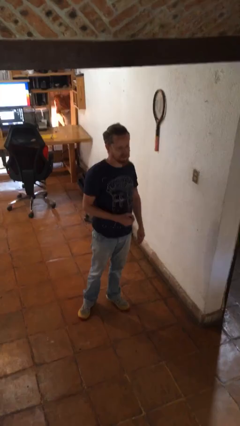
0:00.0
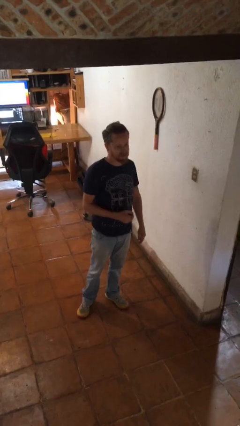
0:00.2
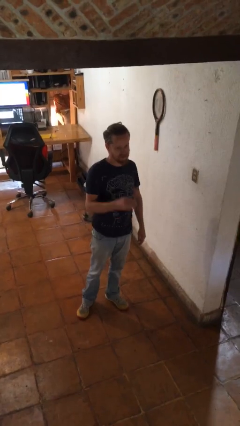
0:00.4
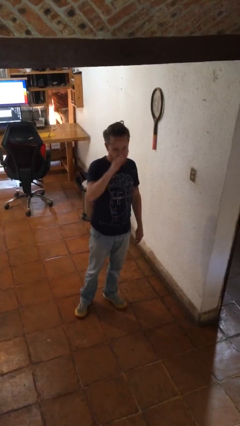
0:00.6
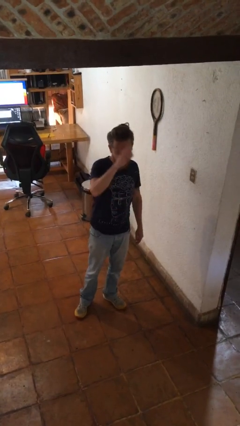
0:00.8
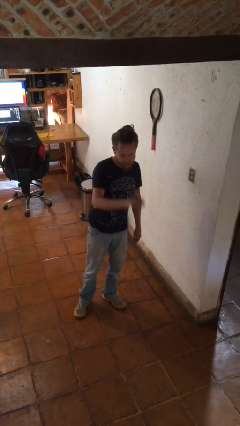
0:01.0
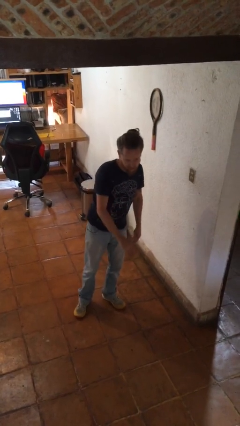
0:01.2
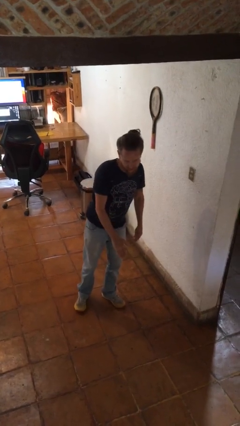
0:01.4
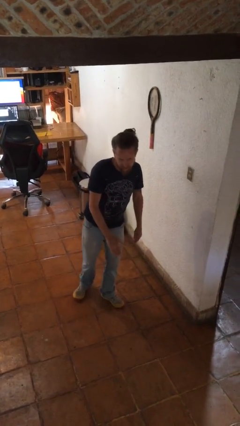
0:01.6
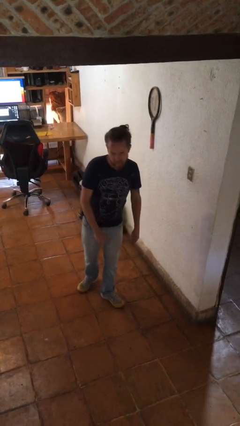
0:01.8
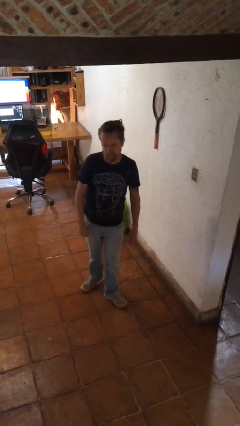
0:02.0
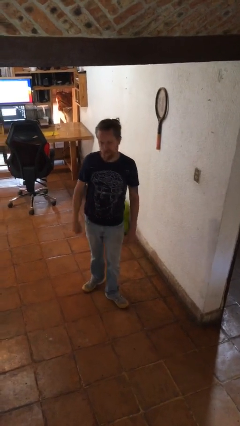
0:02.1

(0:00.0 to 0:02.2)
person gestures swipe down

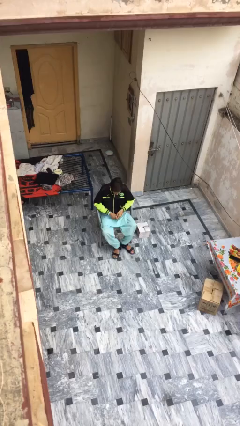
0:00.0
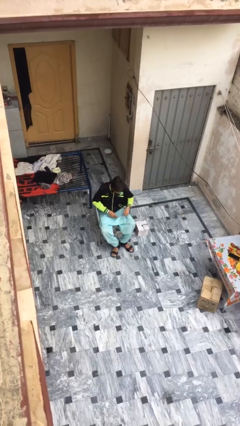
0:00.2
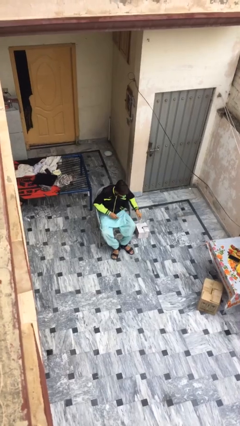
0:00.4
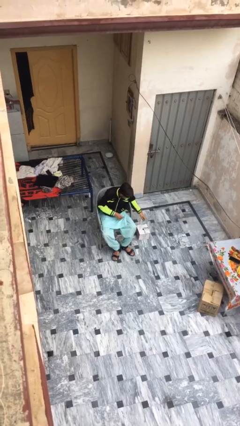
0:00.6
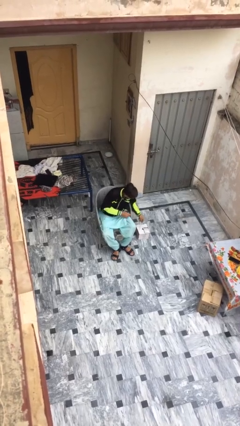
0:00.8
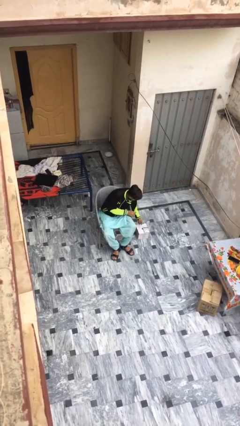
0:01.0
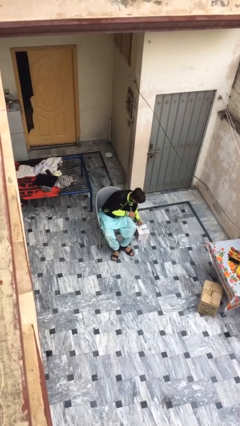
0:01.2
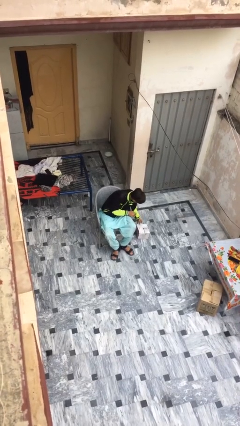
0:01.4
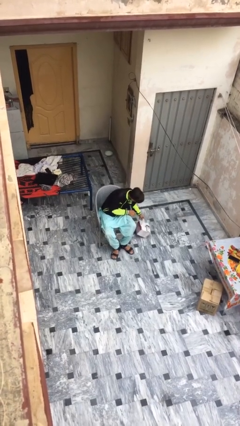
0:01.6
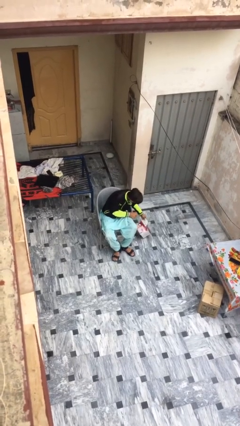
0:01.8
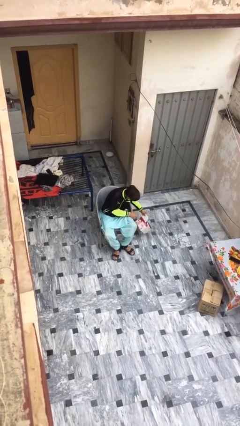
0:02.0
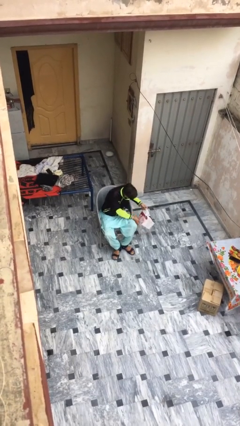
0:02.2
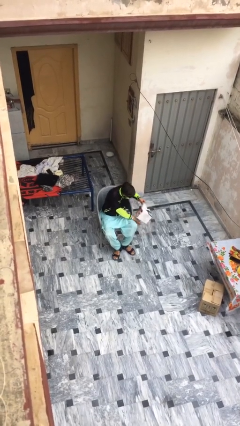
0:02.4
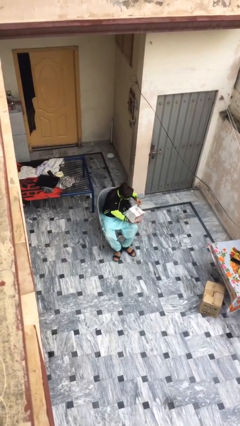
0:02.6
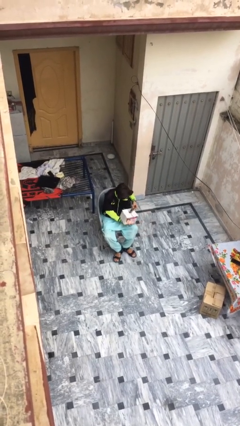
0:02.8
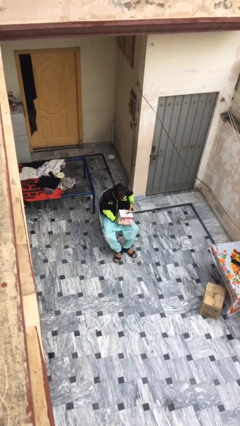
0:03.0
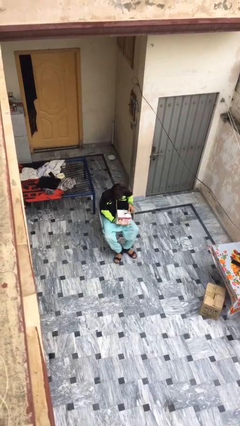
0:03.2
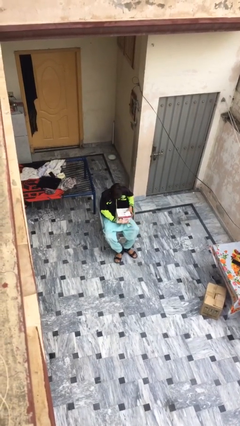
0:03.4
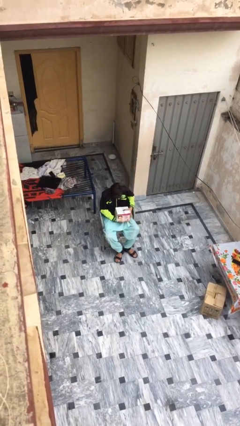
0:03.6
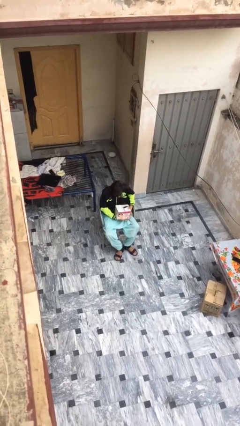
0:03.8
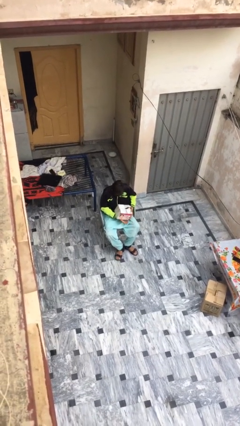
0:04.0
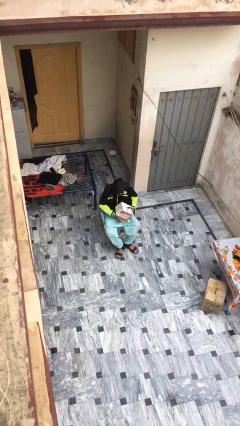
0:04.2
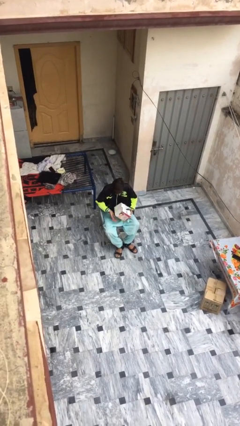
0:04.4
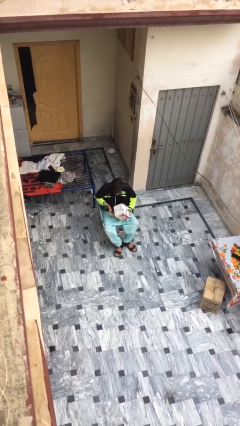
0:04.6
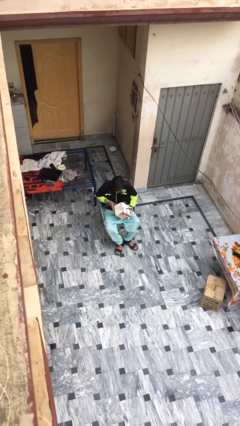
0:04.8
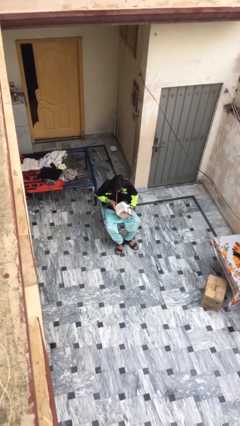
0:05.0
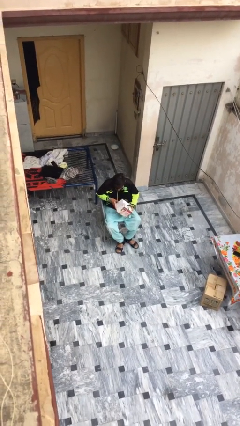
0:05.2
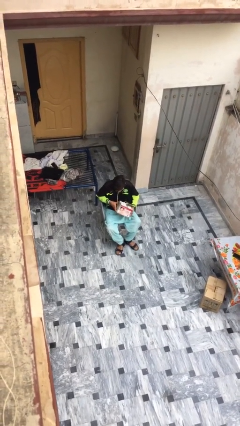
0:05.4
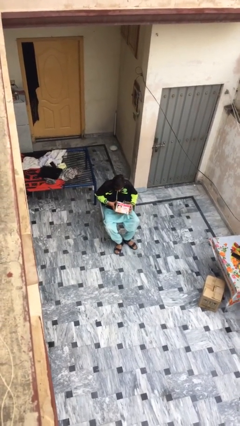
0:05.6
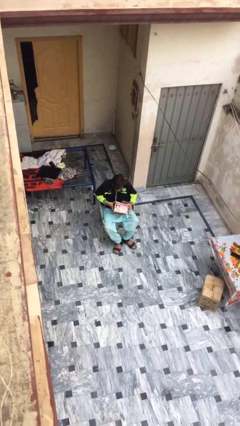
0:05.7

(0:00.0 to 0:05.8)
person picks up object from floor

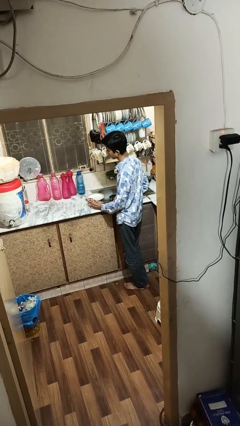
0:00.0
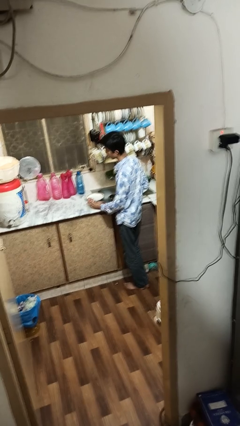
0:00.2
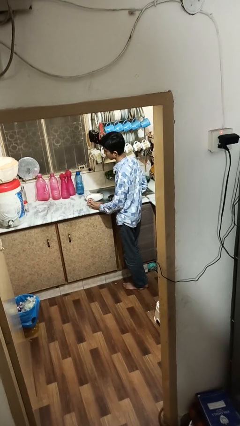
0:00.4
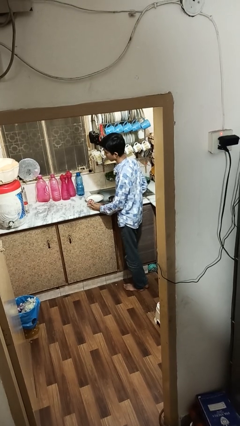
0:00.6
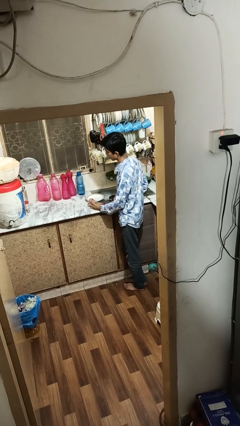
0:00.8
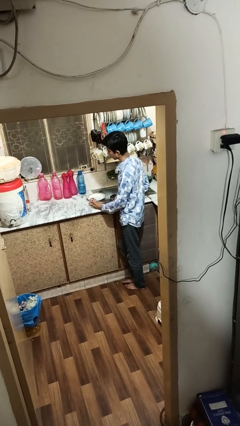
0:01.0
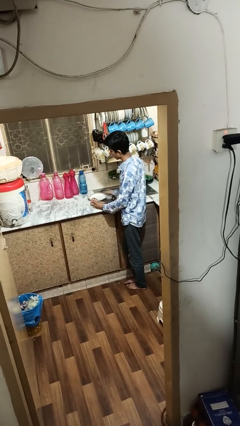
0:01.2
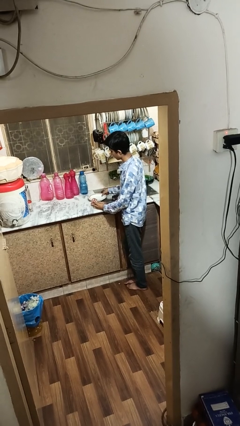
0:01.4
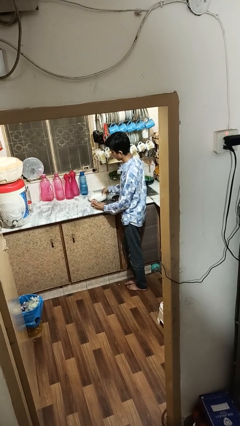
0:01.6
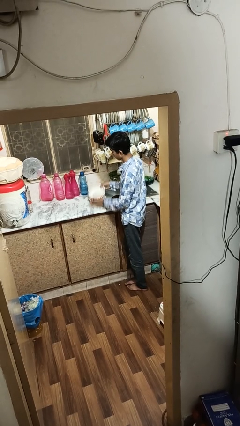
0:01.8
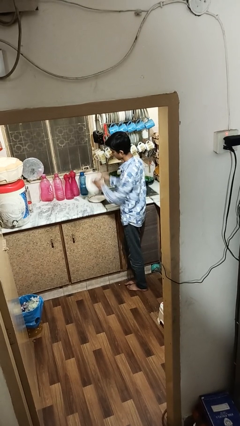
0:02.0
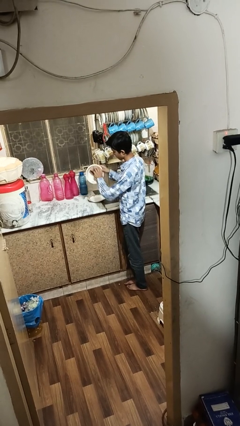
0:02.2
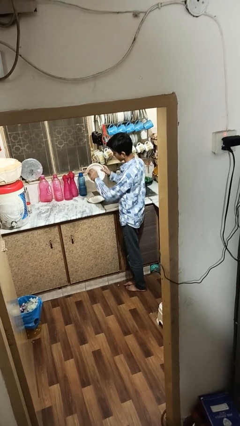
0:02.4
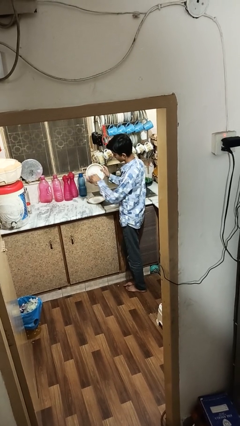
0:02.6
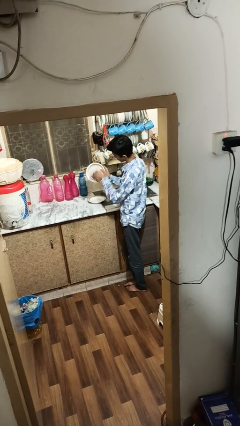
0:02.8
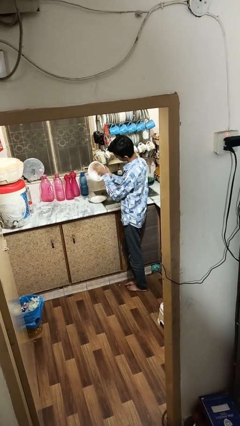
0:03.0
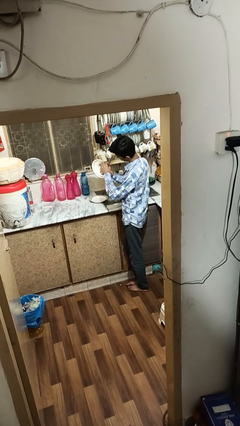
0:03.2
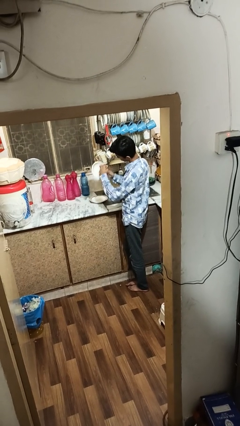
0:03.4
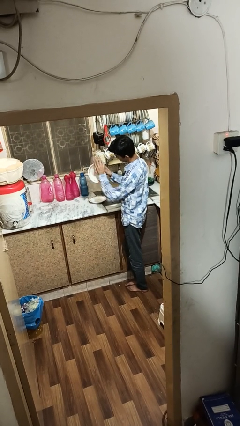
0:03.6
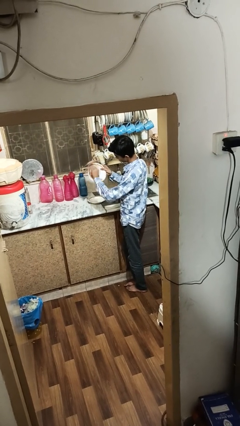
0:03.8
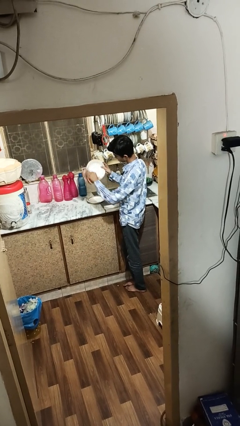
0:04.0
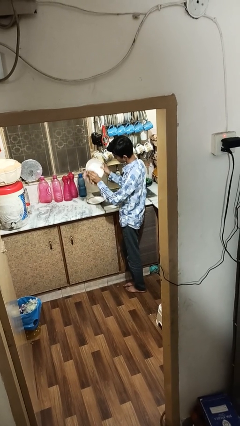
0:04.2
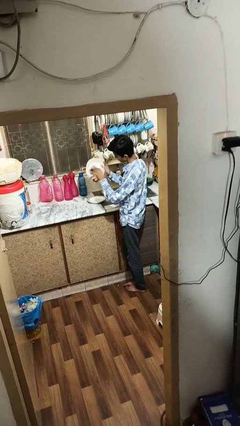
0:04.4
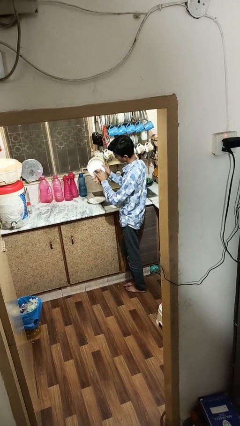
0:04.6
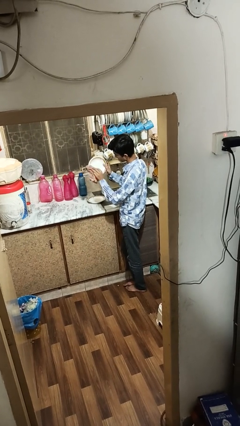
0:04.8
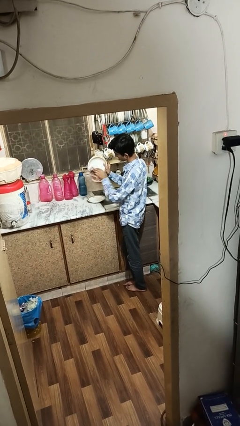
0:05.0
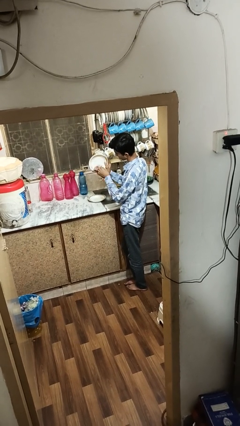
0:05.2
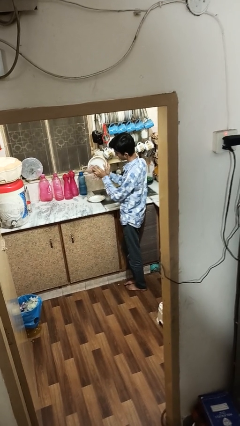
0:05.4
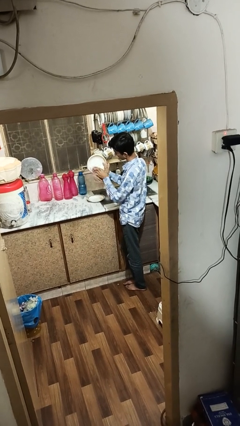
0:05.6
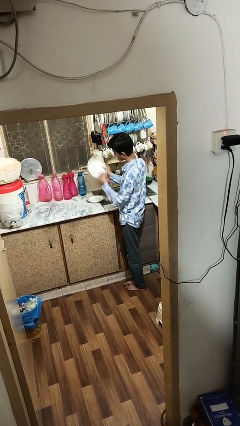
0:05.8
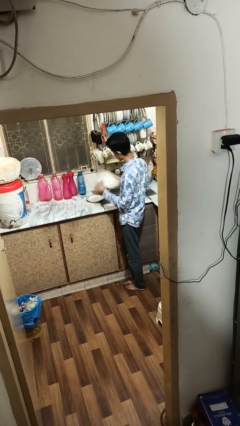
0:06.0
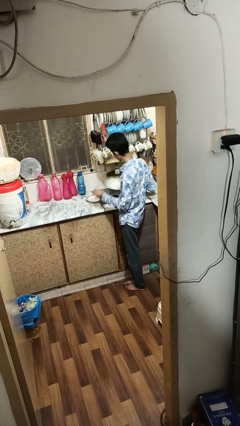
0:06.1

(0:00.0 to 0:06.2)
person dries dish

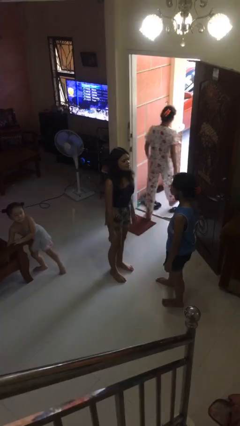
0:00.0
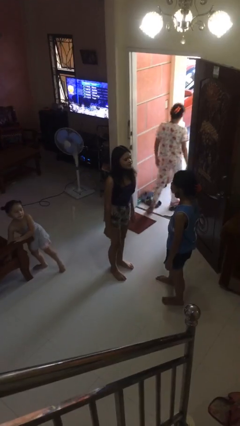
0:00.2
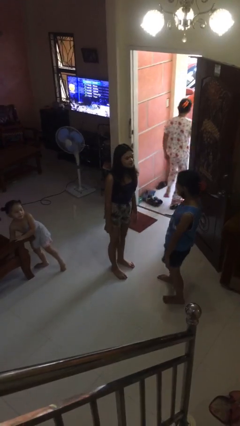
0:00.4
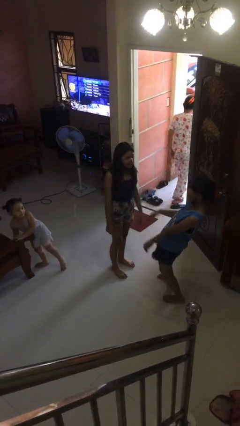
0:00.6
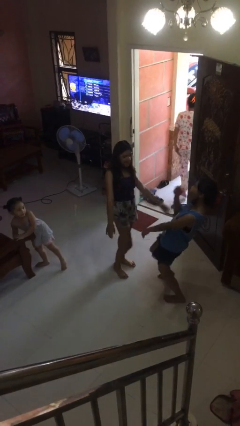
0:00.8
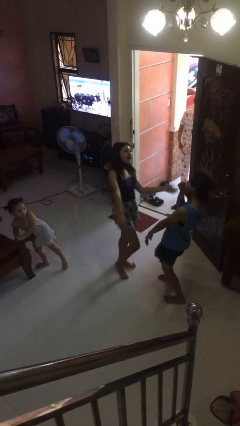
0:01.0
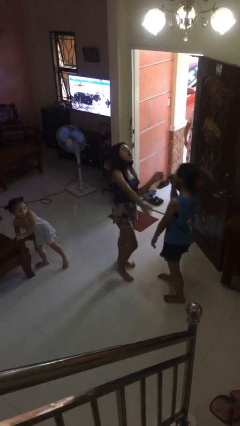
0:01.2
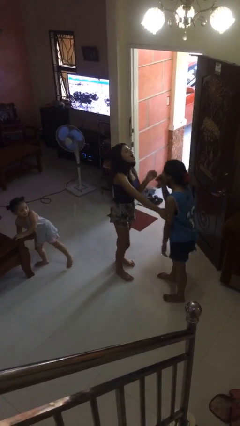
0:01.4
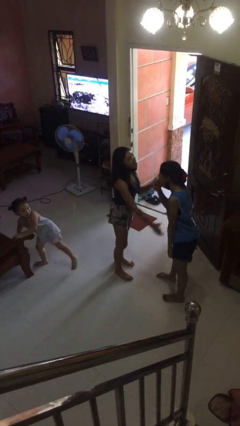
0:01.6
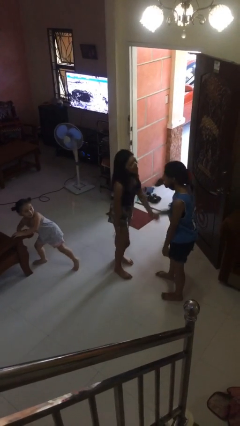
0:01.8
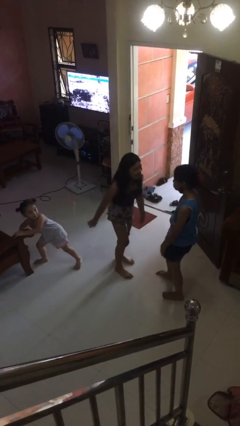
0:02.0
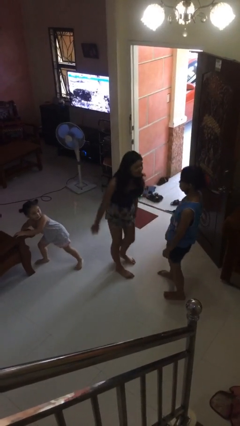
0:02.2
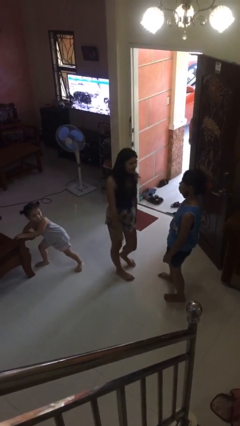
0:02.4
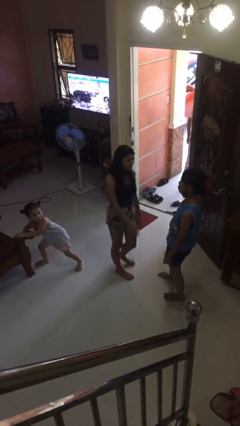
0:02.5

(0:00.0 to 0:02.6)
person laughs with person

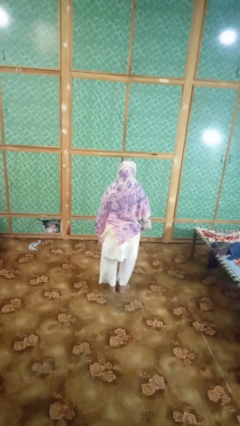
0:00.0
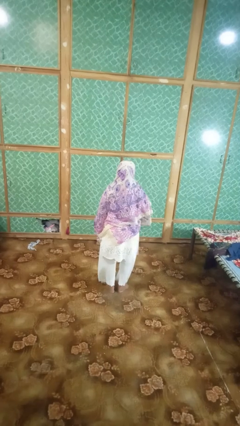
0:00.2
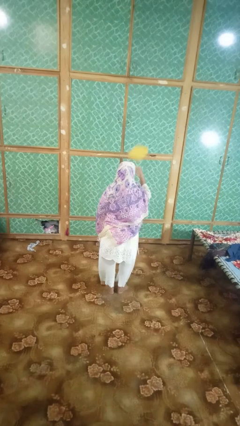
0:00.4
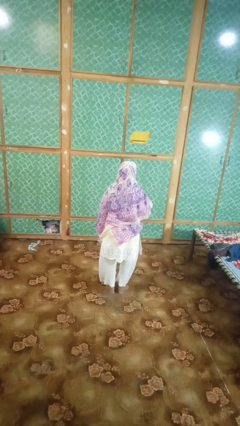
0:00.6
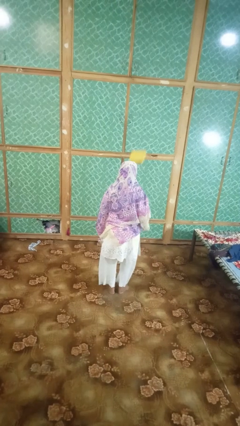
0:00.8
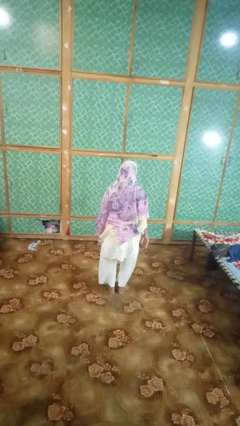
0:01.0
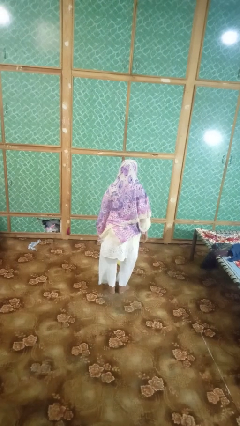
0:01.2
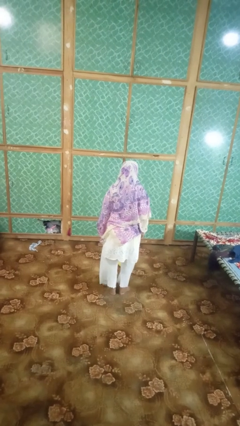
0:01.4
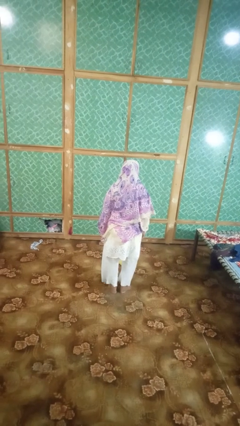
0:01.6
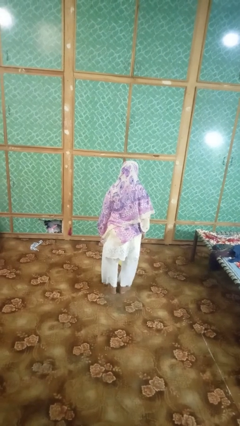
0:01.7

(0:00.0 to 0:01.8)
person throws object into air
